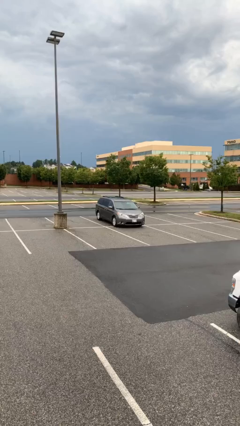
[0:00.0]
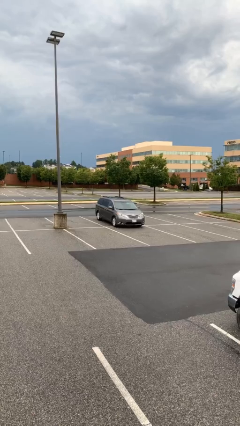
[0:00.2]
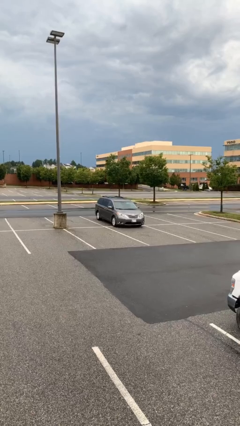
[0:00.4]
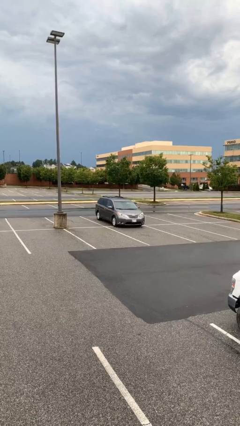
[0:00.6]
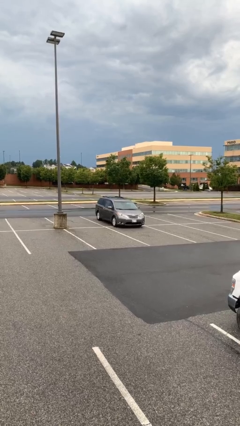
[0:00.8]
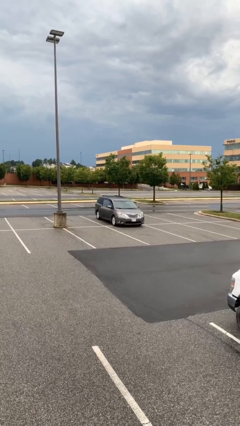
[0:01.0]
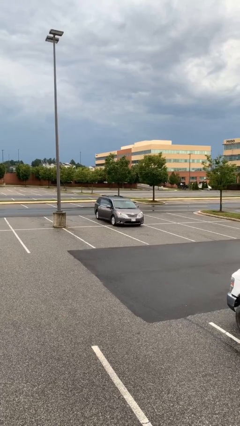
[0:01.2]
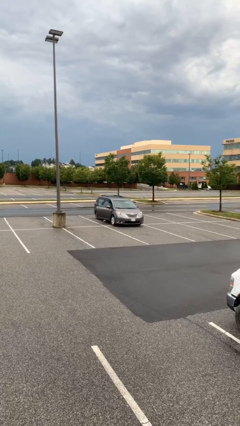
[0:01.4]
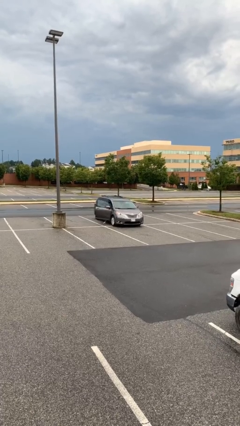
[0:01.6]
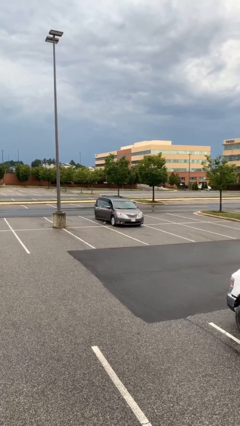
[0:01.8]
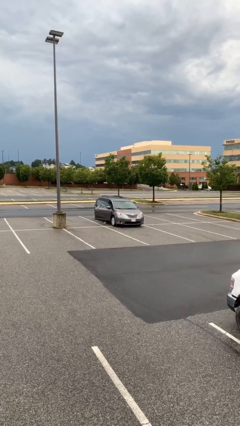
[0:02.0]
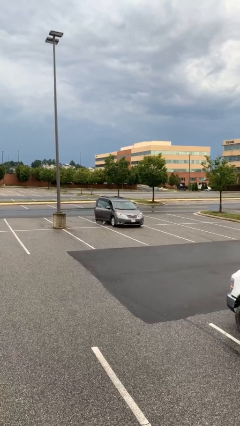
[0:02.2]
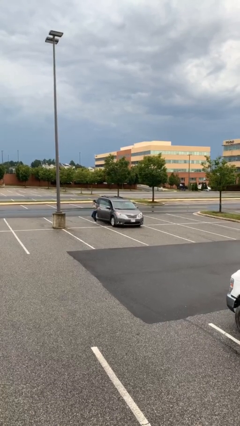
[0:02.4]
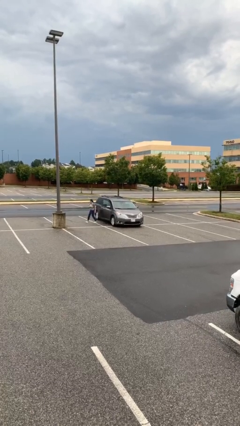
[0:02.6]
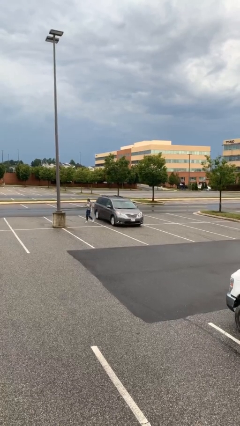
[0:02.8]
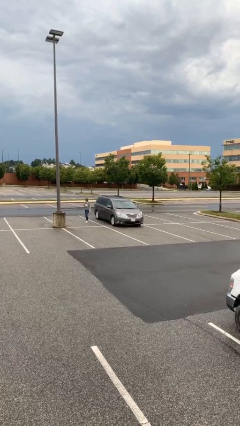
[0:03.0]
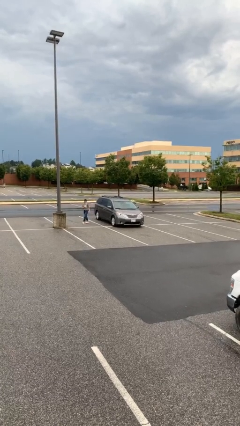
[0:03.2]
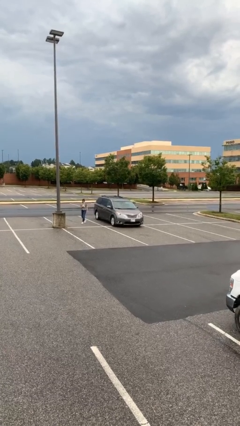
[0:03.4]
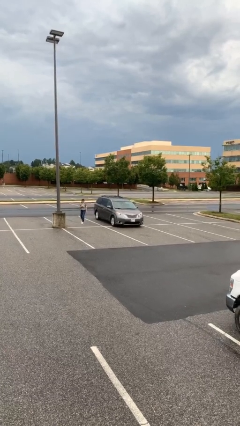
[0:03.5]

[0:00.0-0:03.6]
car drops off person

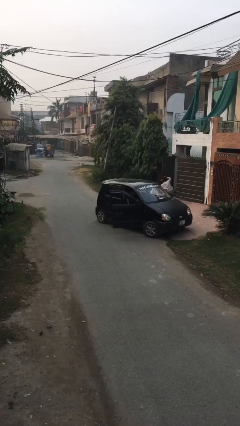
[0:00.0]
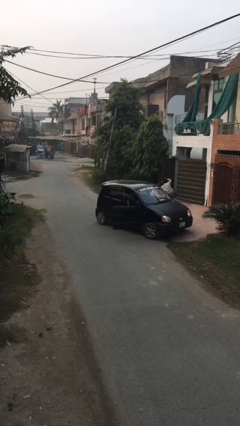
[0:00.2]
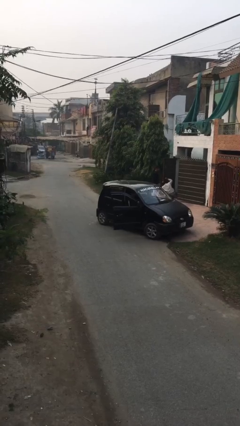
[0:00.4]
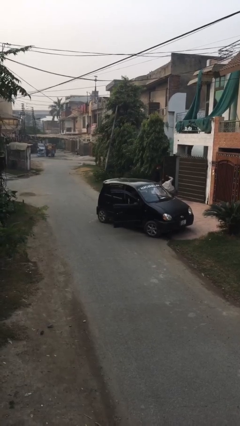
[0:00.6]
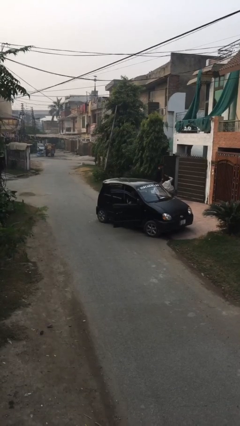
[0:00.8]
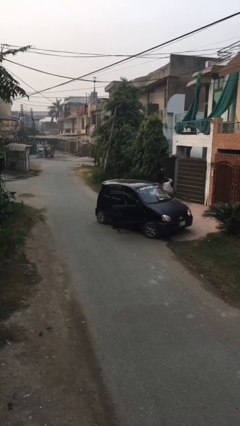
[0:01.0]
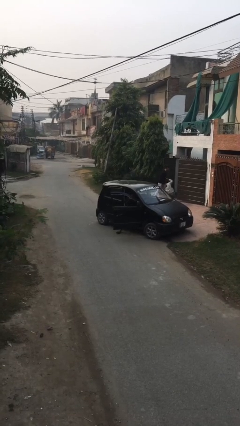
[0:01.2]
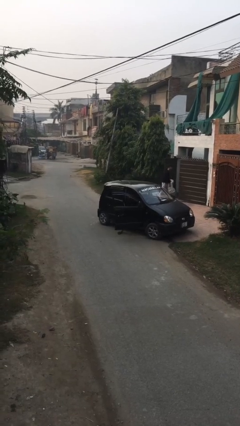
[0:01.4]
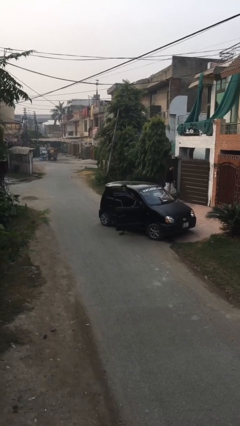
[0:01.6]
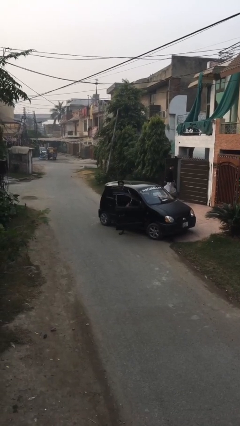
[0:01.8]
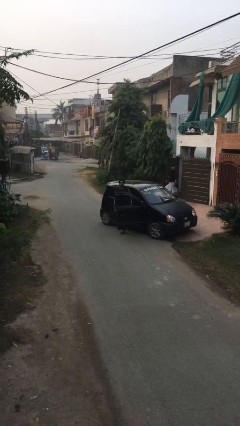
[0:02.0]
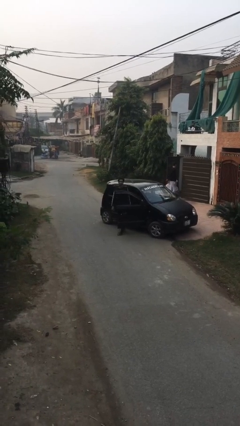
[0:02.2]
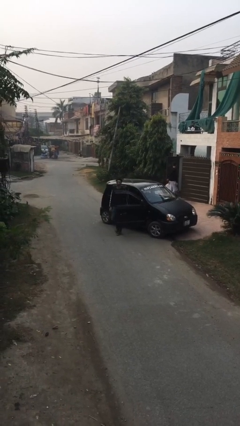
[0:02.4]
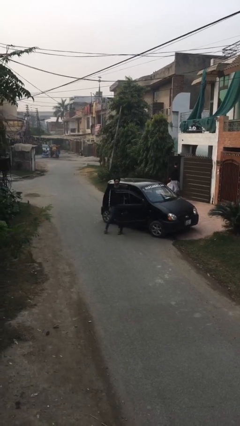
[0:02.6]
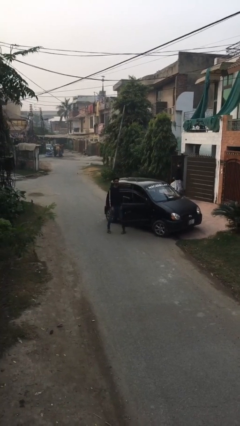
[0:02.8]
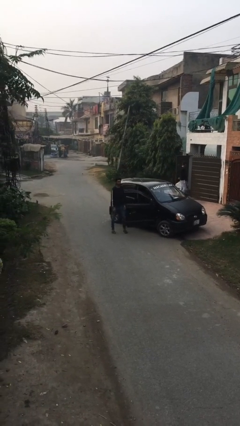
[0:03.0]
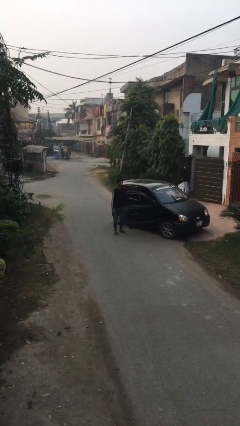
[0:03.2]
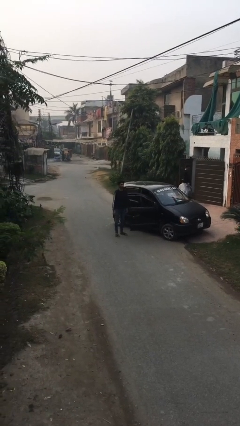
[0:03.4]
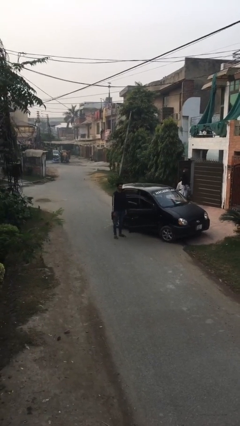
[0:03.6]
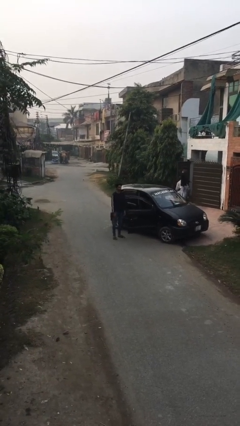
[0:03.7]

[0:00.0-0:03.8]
person exits car

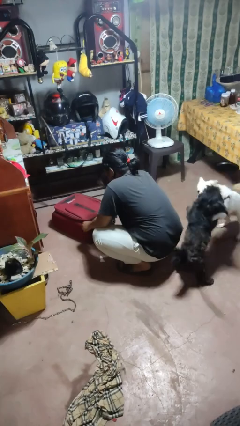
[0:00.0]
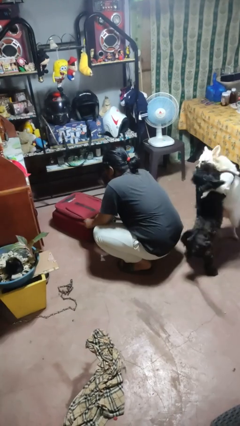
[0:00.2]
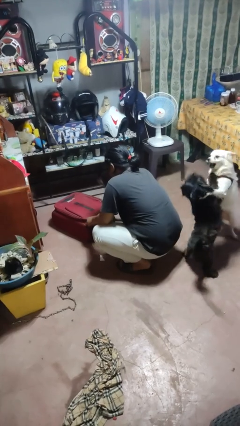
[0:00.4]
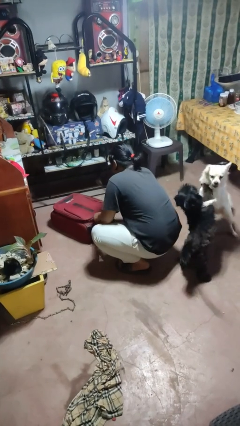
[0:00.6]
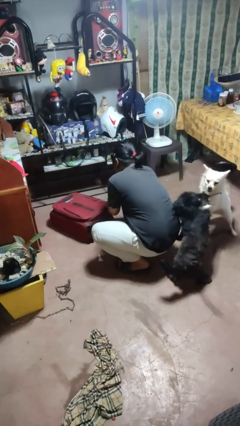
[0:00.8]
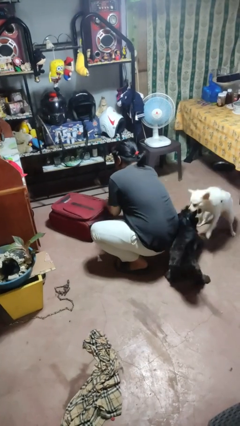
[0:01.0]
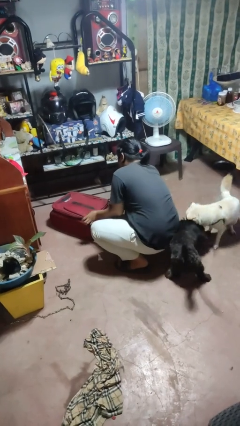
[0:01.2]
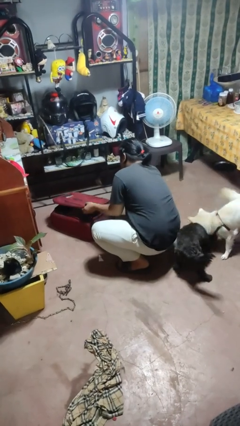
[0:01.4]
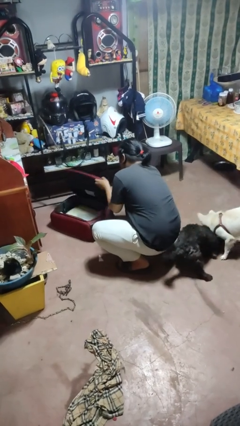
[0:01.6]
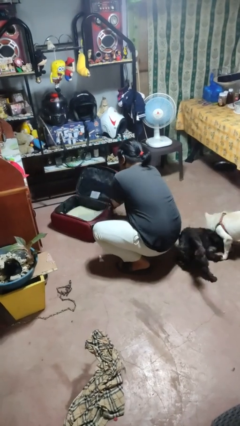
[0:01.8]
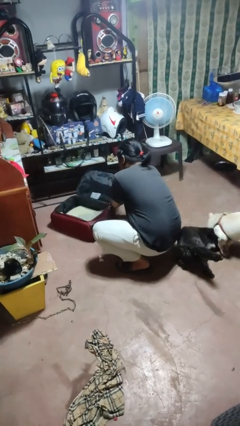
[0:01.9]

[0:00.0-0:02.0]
person opens suitcase

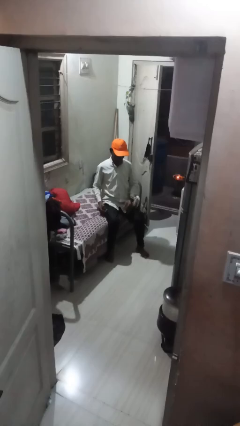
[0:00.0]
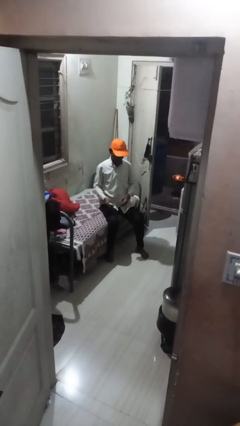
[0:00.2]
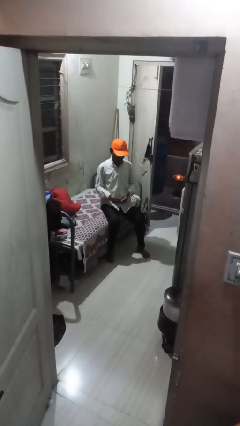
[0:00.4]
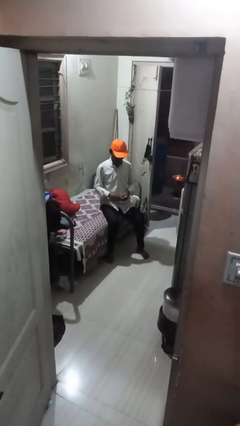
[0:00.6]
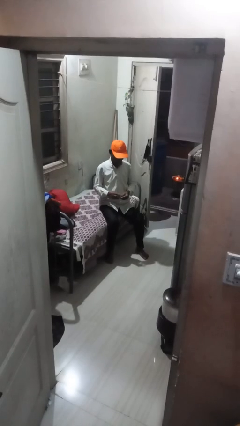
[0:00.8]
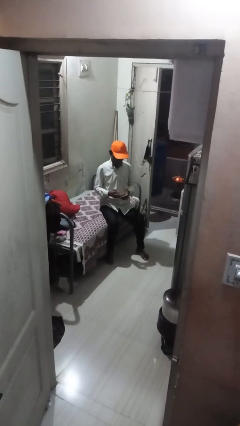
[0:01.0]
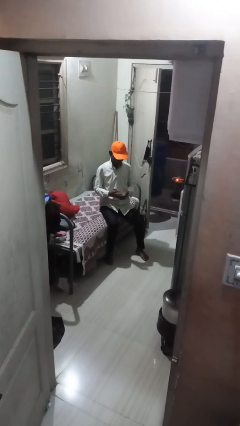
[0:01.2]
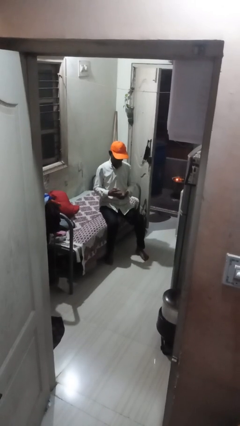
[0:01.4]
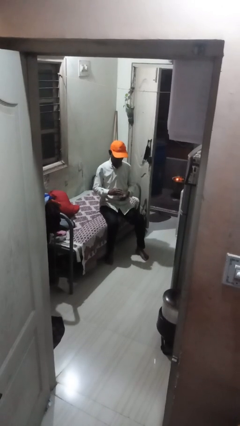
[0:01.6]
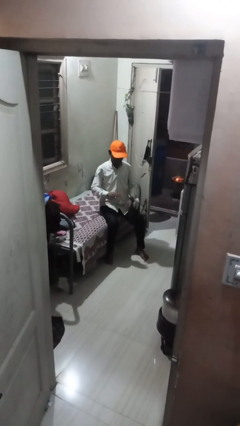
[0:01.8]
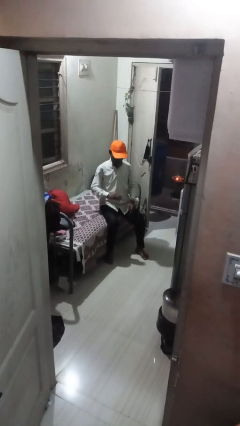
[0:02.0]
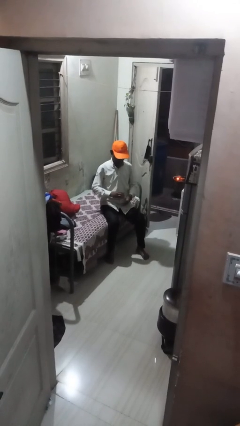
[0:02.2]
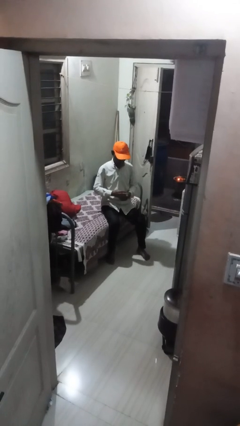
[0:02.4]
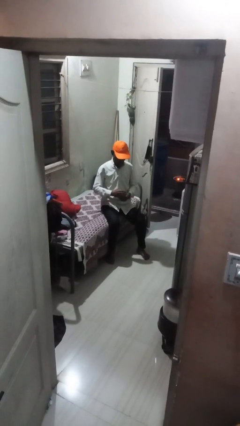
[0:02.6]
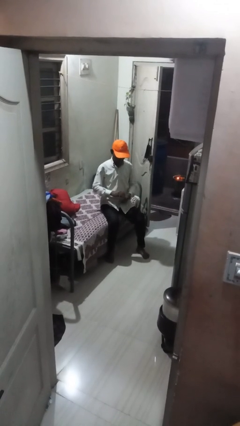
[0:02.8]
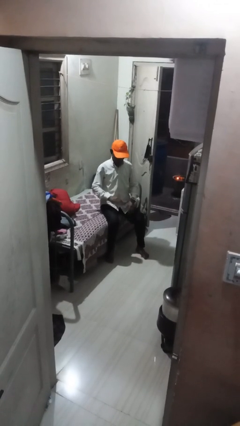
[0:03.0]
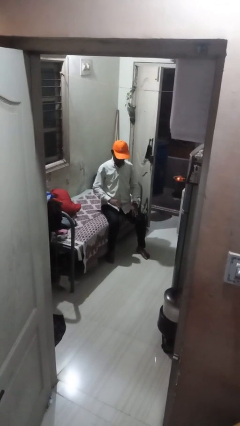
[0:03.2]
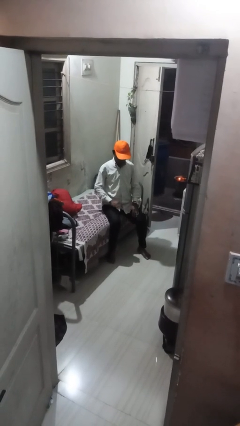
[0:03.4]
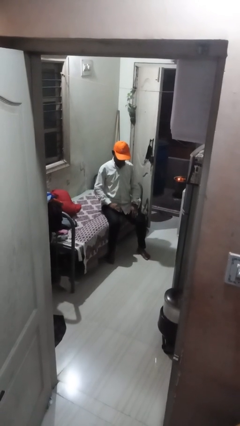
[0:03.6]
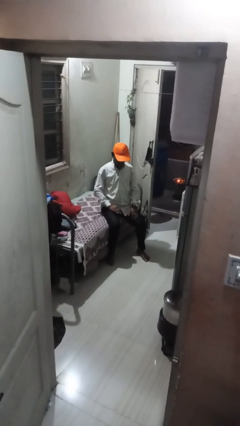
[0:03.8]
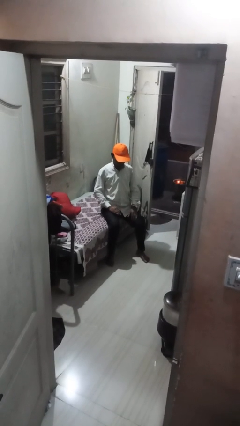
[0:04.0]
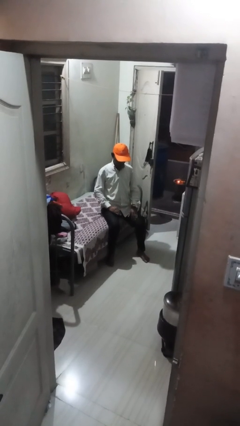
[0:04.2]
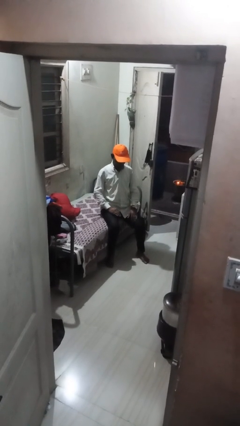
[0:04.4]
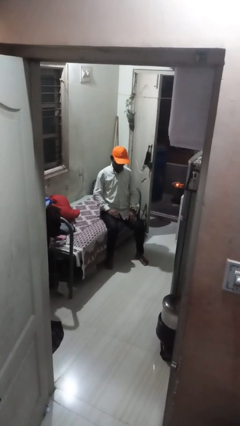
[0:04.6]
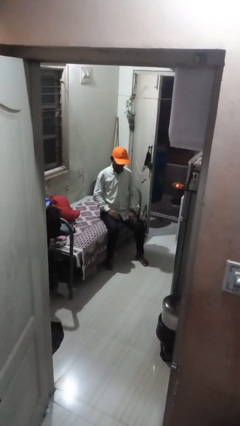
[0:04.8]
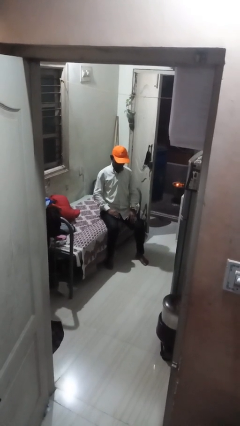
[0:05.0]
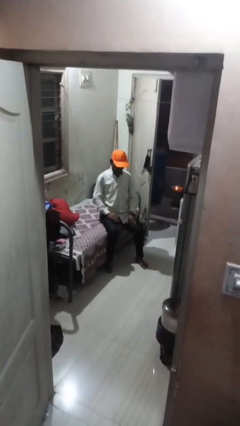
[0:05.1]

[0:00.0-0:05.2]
person puts on ring

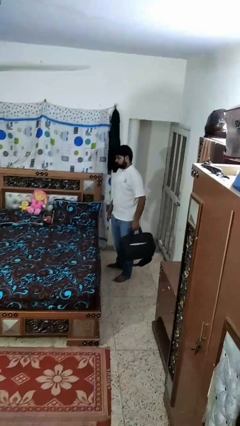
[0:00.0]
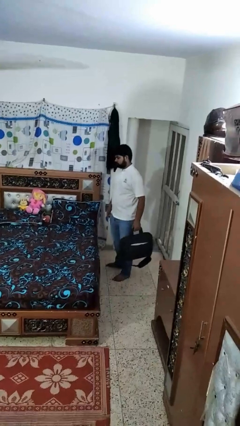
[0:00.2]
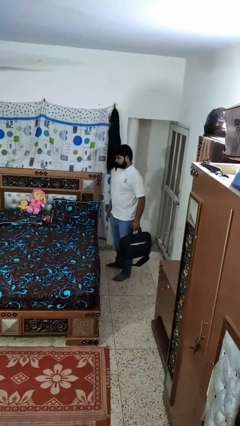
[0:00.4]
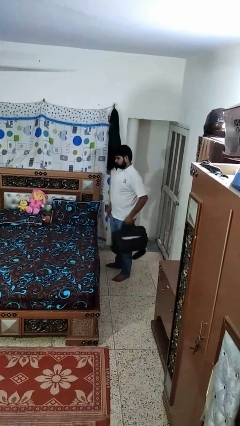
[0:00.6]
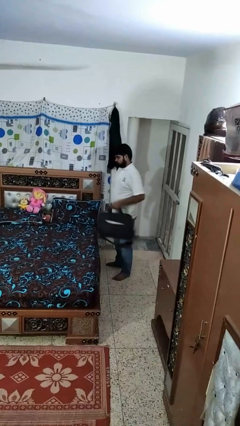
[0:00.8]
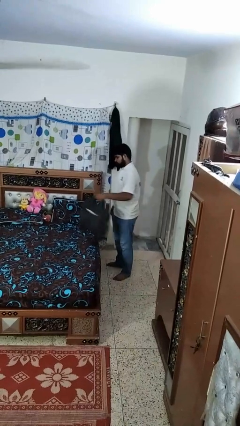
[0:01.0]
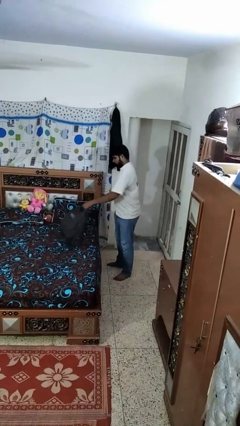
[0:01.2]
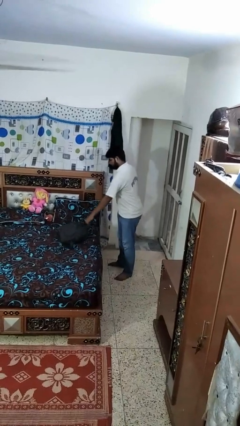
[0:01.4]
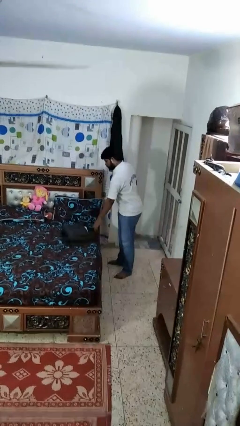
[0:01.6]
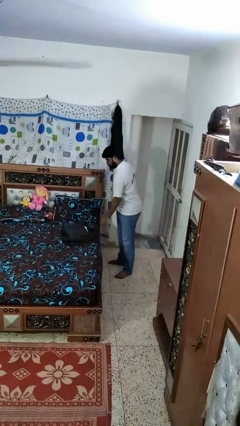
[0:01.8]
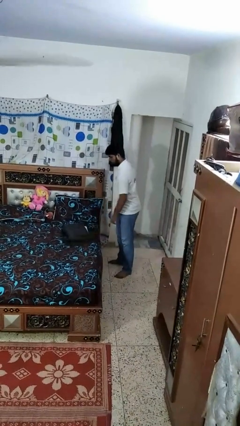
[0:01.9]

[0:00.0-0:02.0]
person puts down object on bed

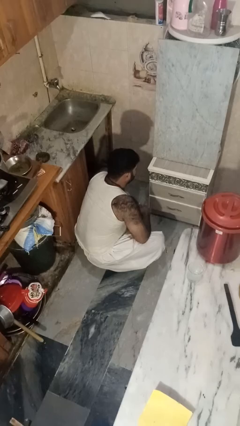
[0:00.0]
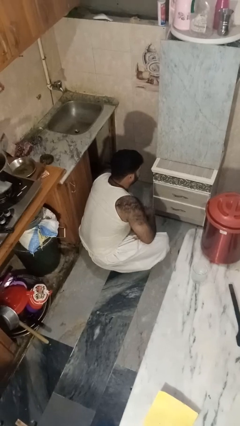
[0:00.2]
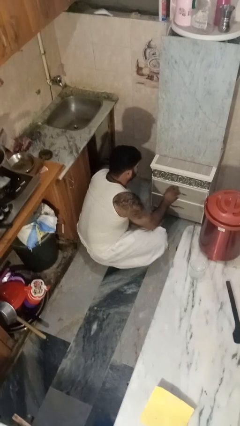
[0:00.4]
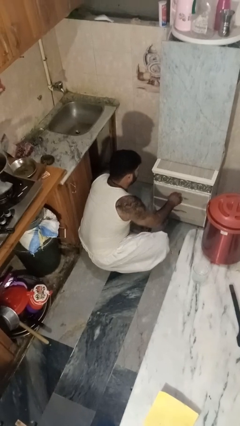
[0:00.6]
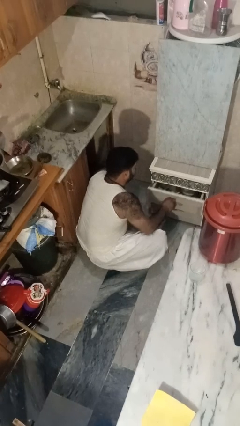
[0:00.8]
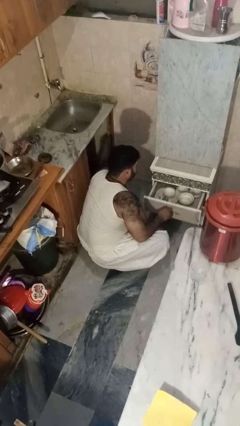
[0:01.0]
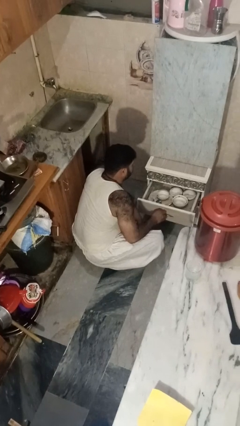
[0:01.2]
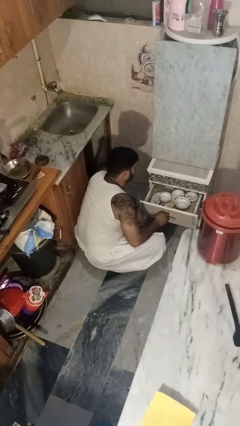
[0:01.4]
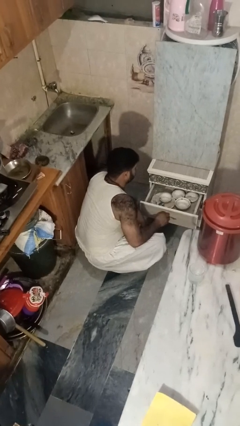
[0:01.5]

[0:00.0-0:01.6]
person opens kitchen drawer
